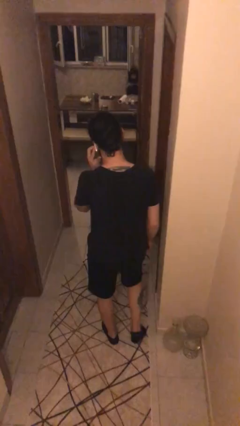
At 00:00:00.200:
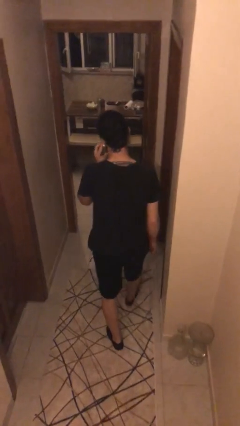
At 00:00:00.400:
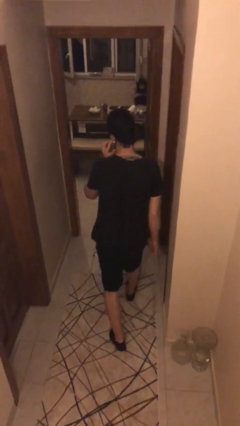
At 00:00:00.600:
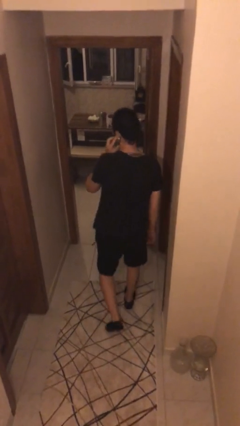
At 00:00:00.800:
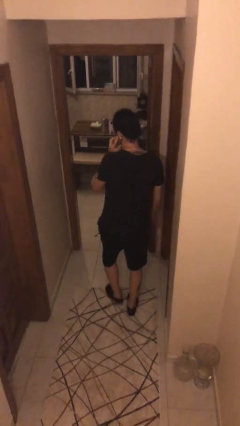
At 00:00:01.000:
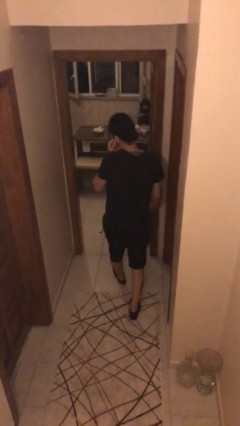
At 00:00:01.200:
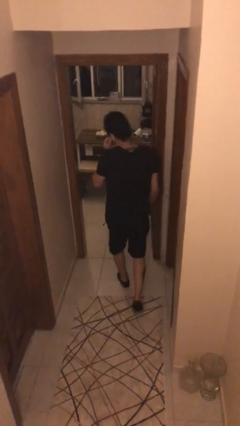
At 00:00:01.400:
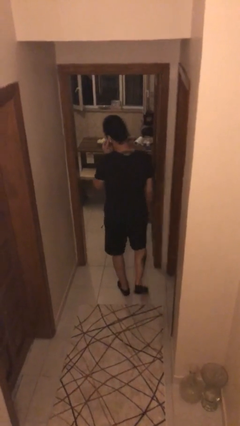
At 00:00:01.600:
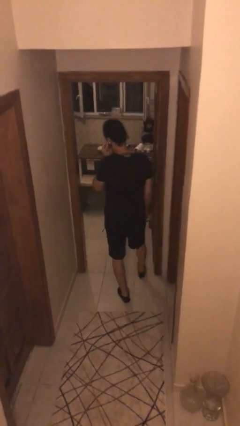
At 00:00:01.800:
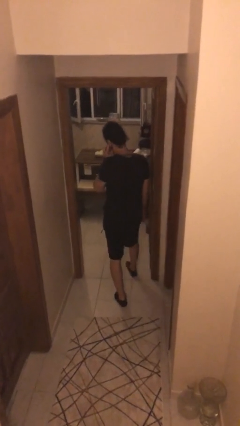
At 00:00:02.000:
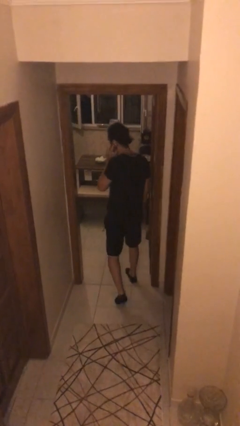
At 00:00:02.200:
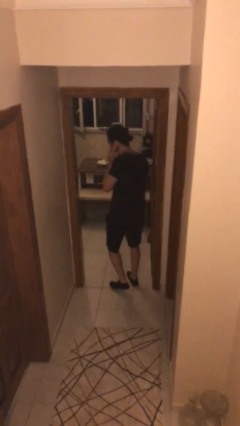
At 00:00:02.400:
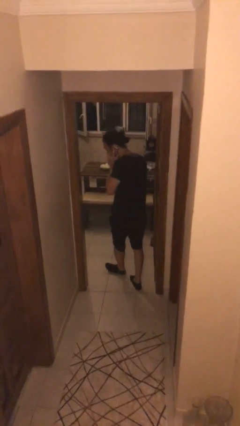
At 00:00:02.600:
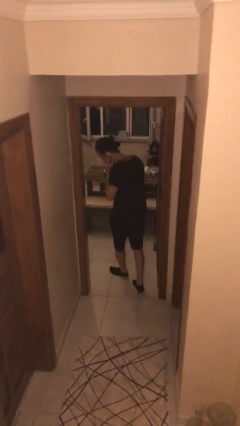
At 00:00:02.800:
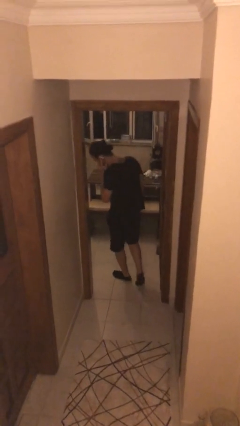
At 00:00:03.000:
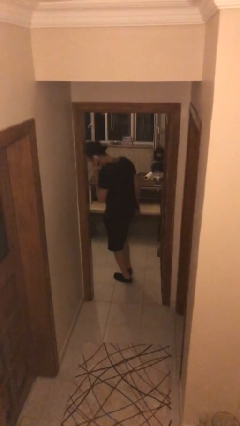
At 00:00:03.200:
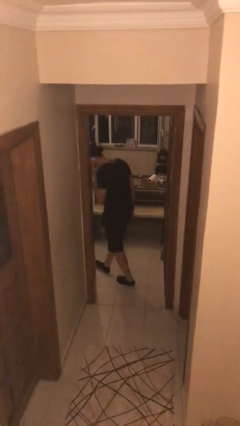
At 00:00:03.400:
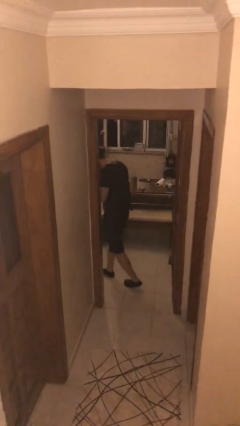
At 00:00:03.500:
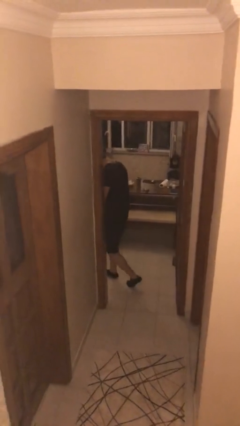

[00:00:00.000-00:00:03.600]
person exits scene through structure

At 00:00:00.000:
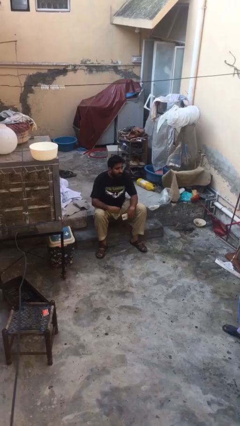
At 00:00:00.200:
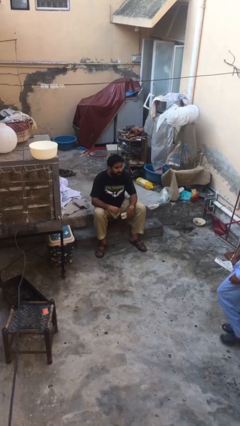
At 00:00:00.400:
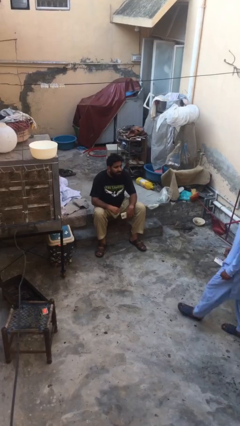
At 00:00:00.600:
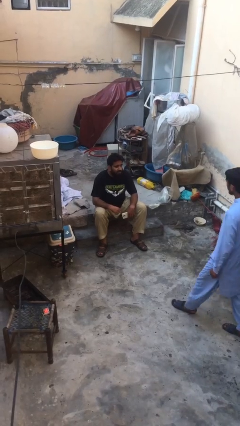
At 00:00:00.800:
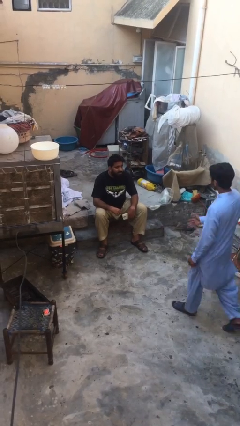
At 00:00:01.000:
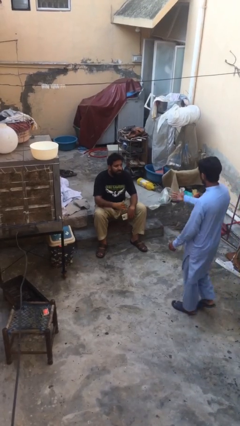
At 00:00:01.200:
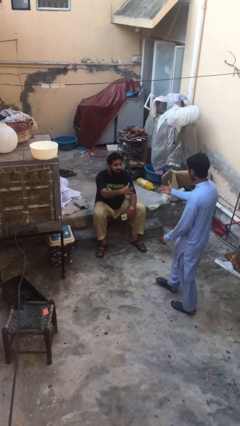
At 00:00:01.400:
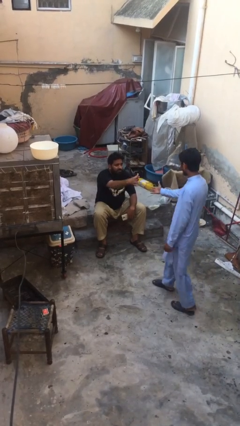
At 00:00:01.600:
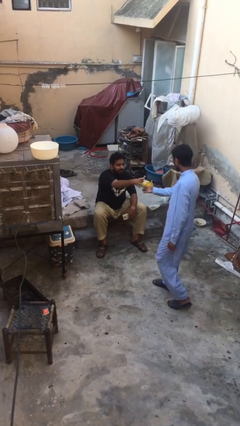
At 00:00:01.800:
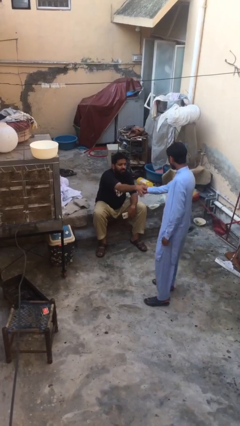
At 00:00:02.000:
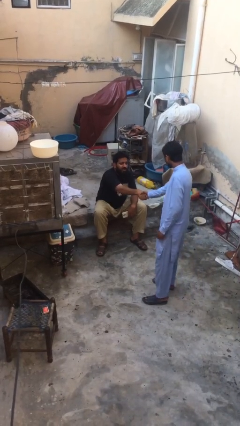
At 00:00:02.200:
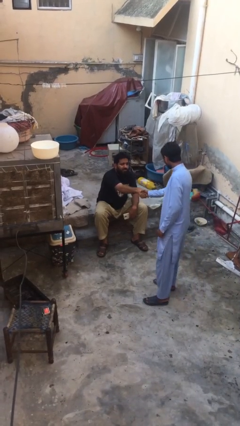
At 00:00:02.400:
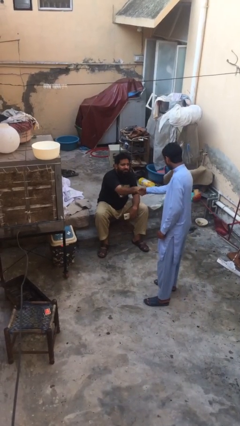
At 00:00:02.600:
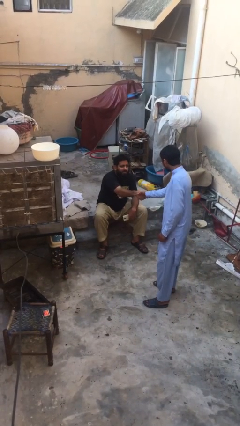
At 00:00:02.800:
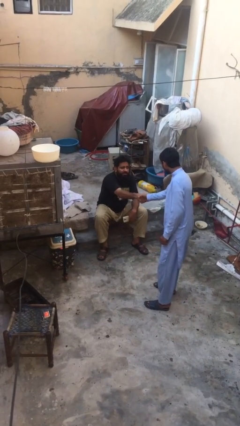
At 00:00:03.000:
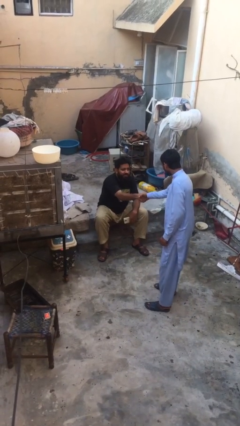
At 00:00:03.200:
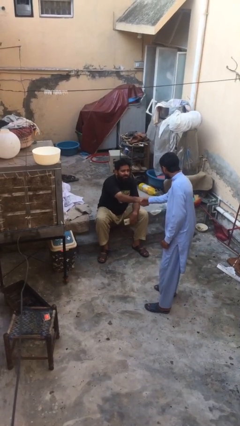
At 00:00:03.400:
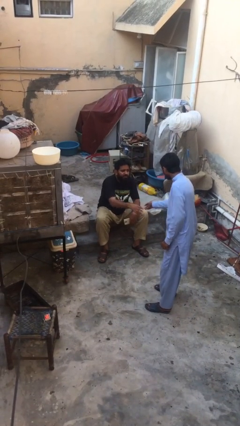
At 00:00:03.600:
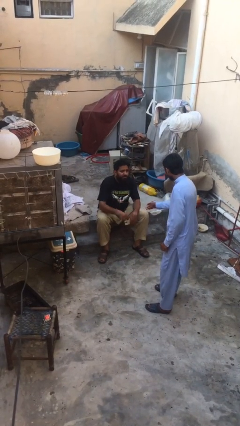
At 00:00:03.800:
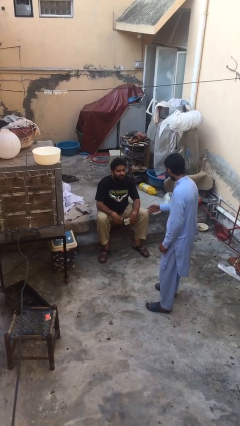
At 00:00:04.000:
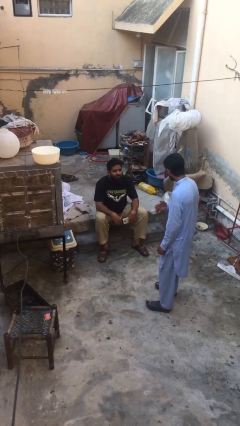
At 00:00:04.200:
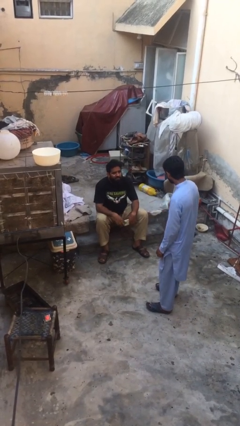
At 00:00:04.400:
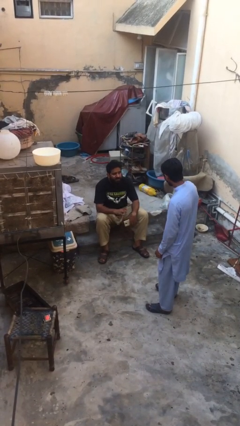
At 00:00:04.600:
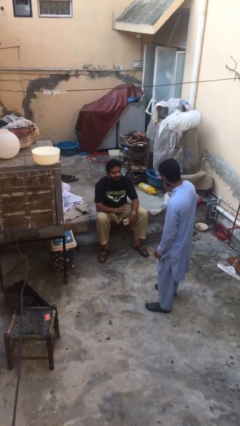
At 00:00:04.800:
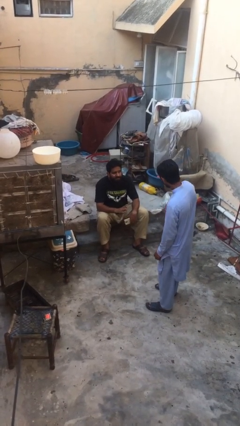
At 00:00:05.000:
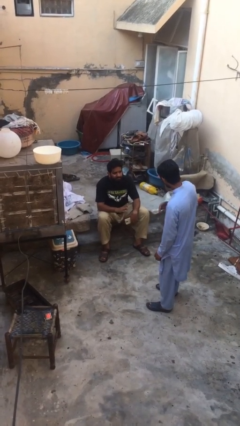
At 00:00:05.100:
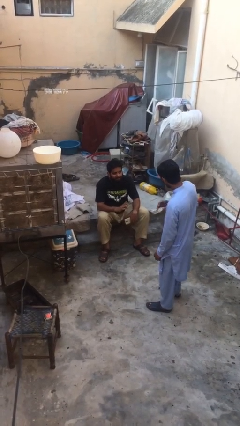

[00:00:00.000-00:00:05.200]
person shakes hand

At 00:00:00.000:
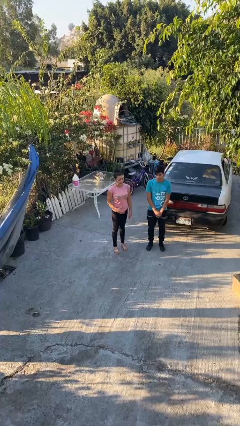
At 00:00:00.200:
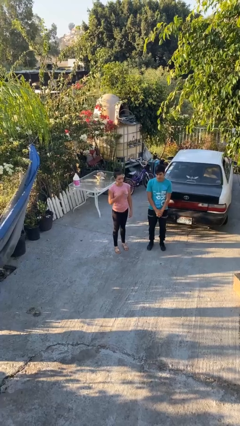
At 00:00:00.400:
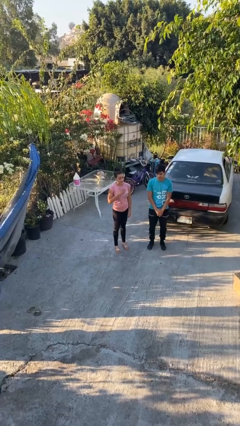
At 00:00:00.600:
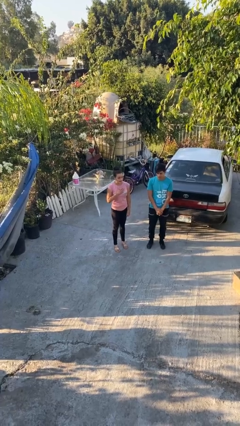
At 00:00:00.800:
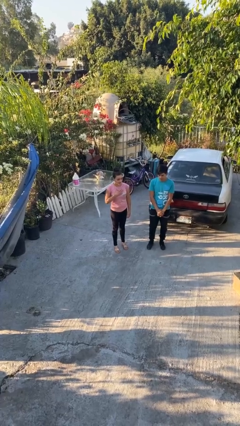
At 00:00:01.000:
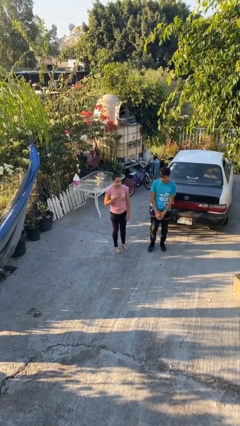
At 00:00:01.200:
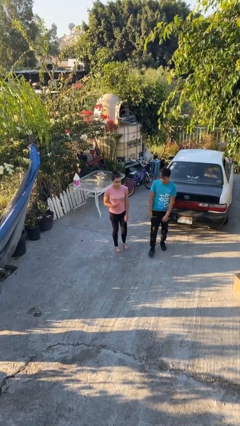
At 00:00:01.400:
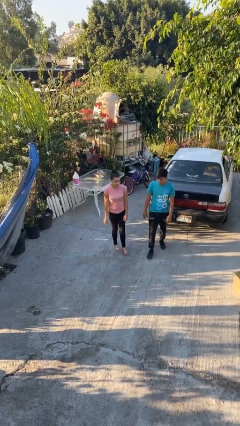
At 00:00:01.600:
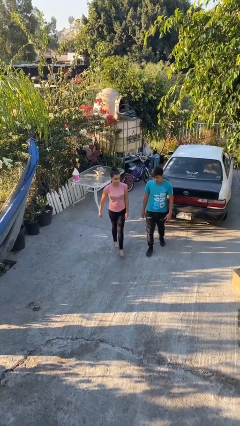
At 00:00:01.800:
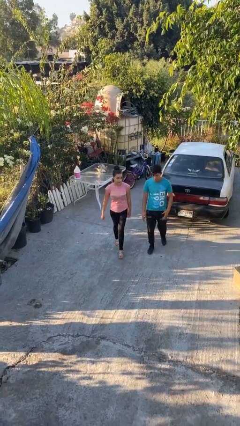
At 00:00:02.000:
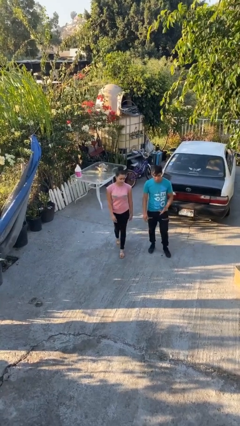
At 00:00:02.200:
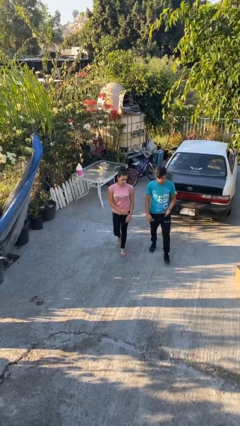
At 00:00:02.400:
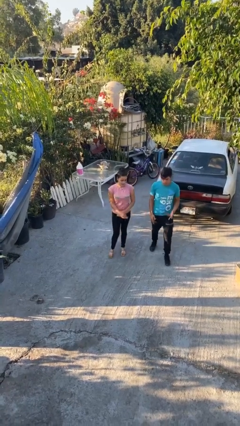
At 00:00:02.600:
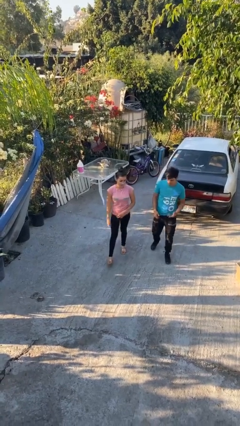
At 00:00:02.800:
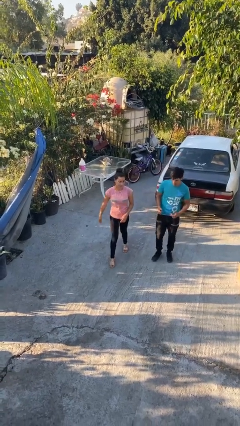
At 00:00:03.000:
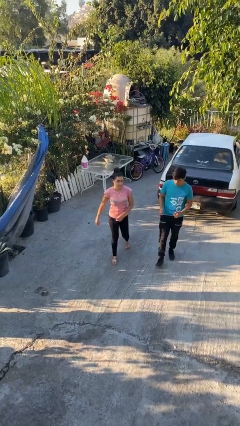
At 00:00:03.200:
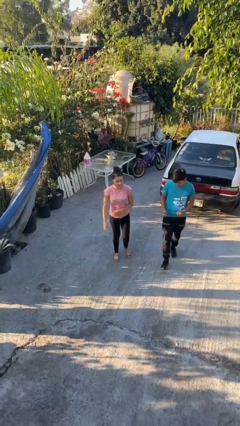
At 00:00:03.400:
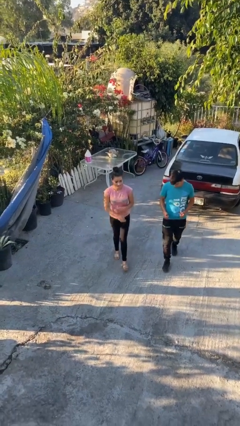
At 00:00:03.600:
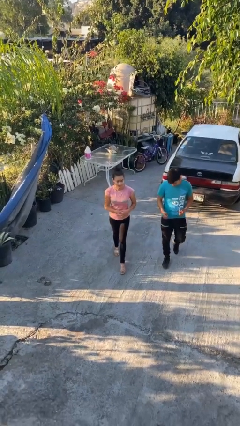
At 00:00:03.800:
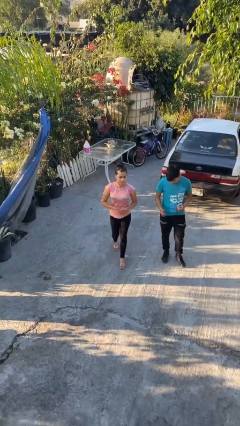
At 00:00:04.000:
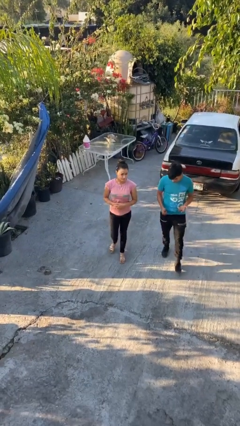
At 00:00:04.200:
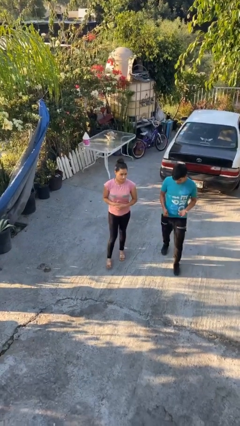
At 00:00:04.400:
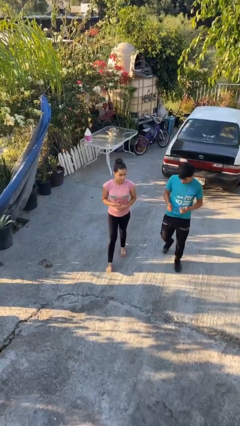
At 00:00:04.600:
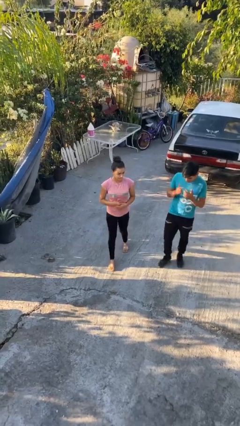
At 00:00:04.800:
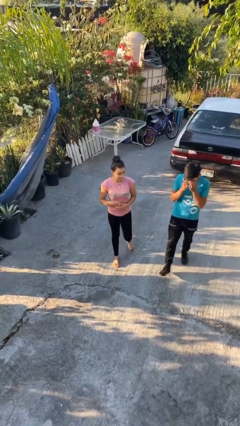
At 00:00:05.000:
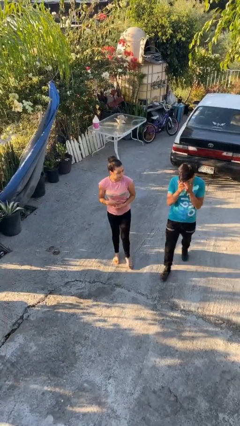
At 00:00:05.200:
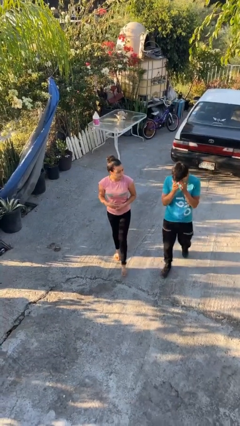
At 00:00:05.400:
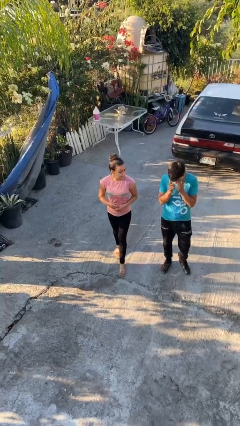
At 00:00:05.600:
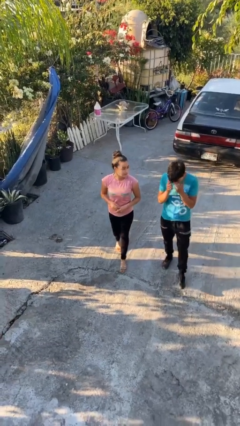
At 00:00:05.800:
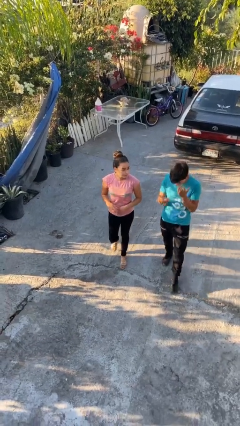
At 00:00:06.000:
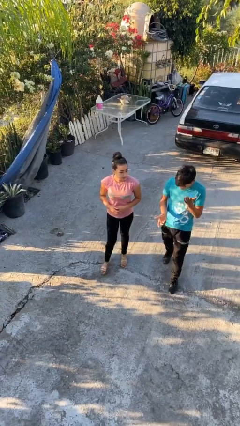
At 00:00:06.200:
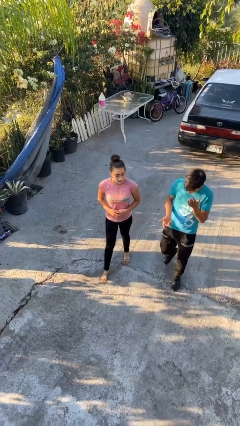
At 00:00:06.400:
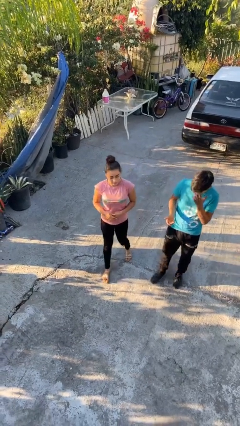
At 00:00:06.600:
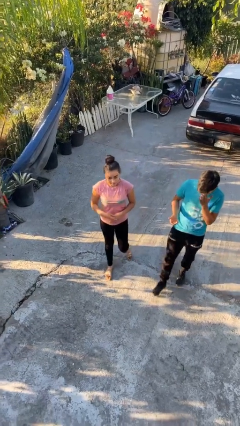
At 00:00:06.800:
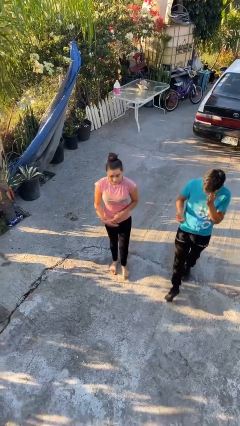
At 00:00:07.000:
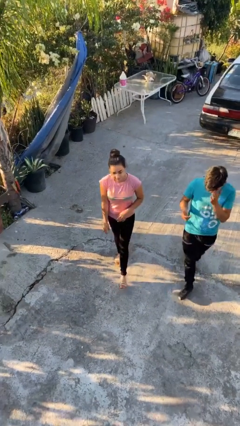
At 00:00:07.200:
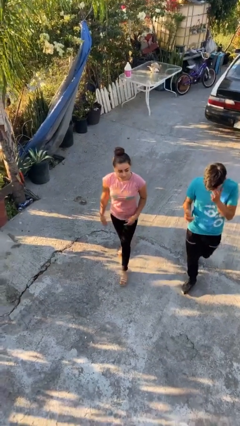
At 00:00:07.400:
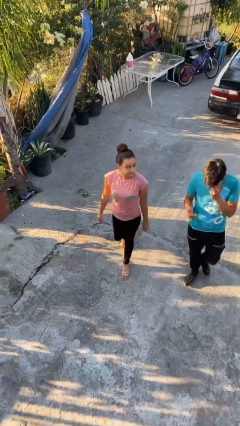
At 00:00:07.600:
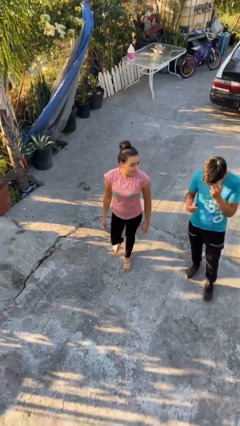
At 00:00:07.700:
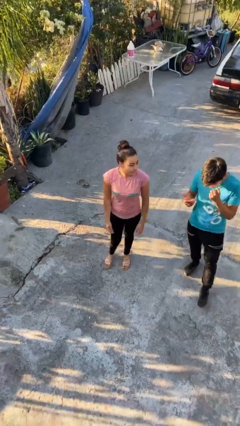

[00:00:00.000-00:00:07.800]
person talks to person

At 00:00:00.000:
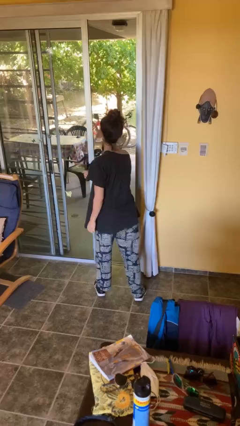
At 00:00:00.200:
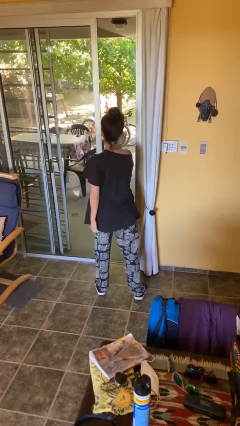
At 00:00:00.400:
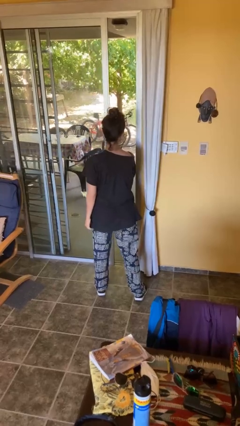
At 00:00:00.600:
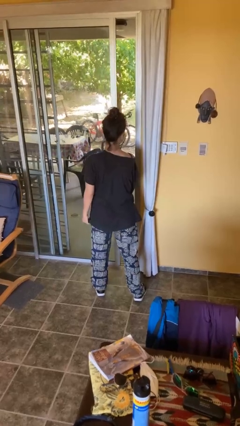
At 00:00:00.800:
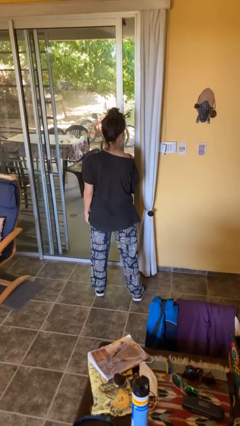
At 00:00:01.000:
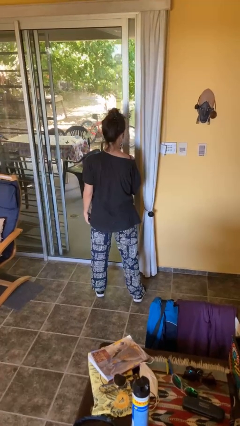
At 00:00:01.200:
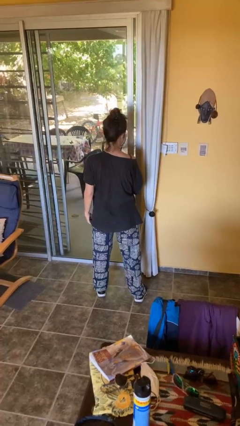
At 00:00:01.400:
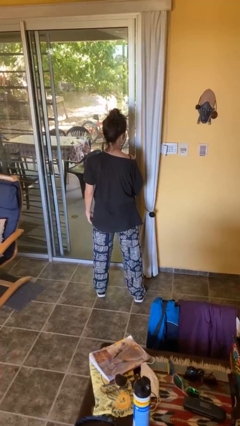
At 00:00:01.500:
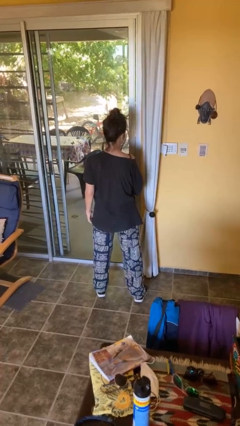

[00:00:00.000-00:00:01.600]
person closes facility door
